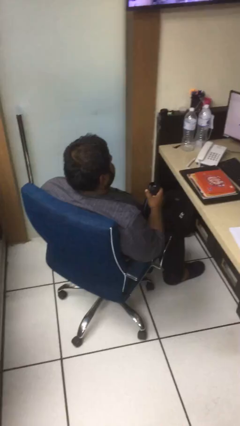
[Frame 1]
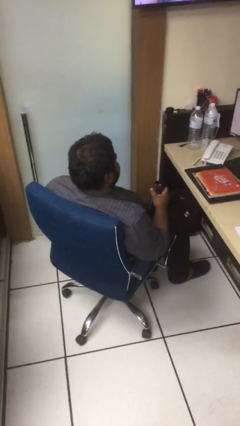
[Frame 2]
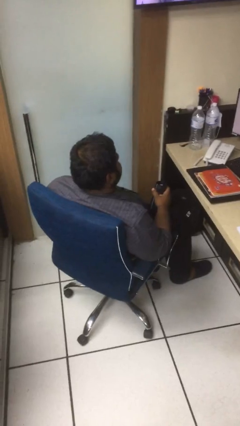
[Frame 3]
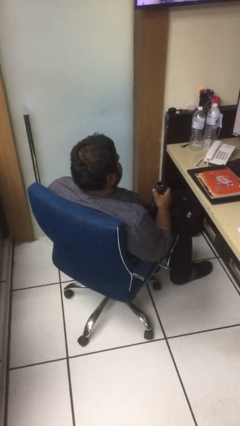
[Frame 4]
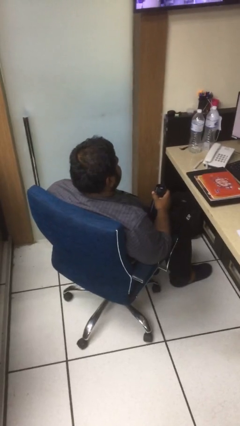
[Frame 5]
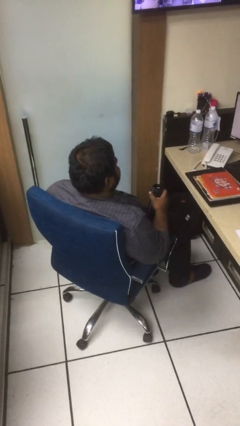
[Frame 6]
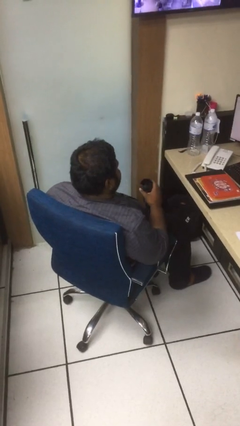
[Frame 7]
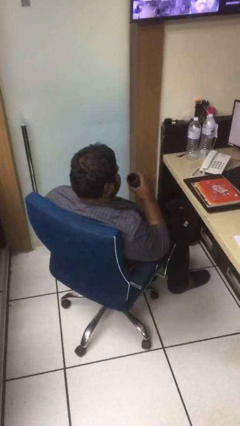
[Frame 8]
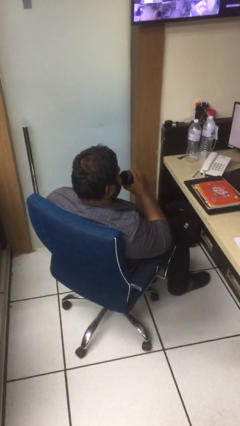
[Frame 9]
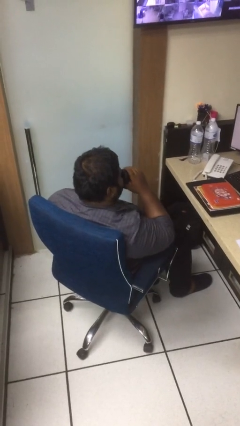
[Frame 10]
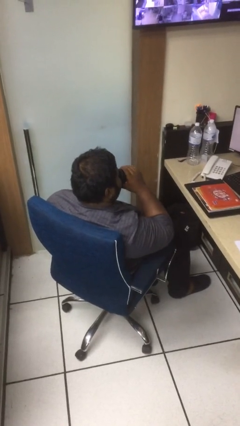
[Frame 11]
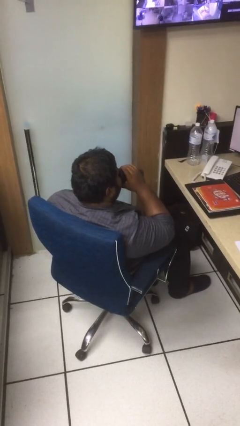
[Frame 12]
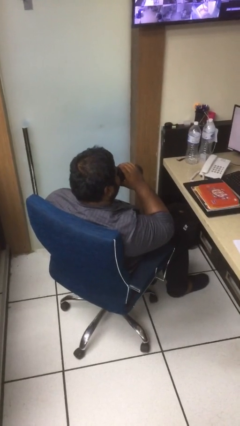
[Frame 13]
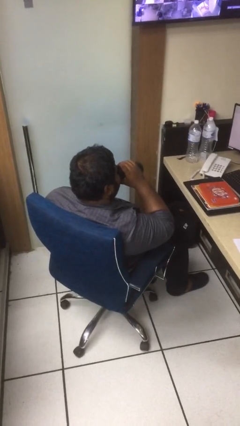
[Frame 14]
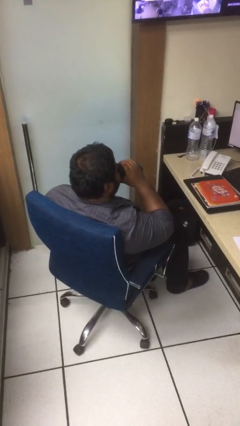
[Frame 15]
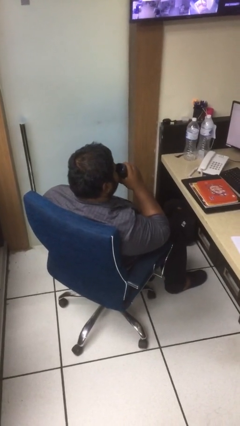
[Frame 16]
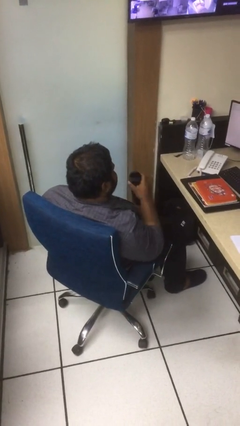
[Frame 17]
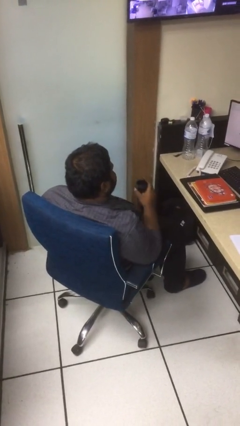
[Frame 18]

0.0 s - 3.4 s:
person drinks from bottle

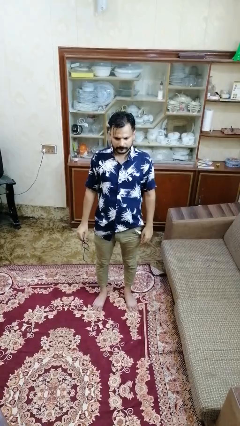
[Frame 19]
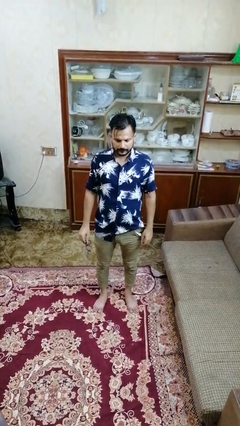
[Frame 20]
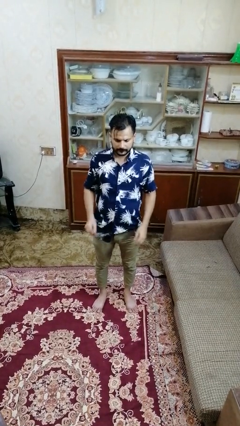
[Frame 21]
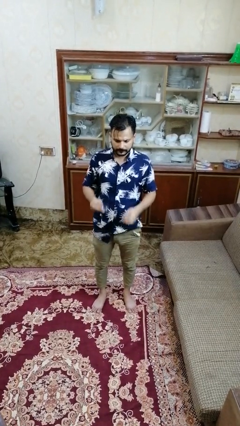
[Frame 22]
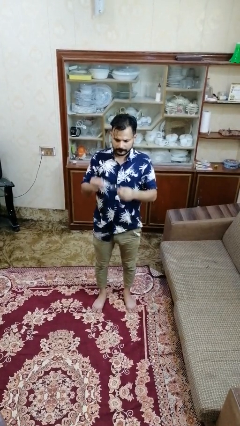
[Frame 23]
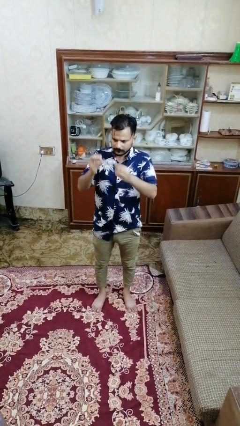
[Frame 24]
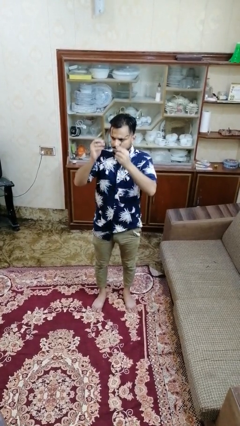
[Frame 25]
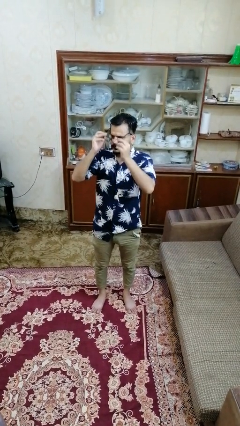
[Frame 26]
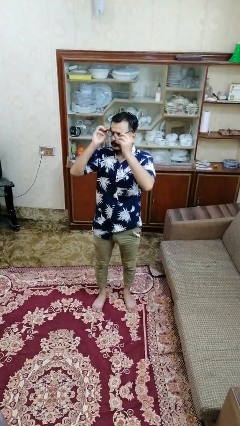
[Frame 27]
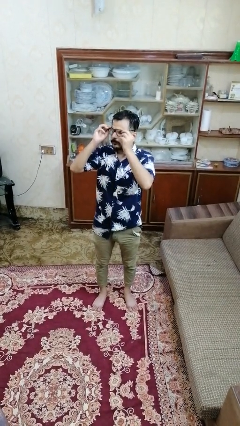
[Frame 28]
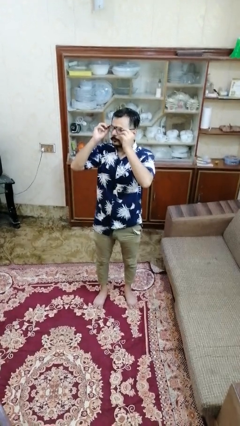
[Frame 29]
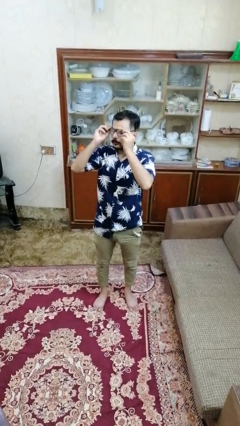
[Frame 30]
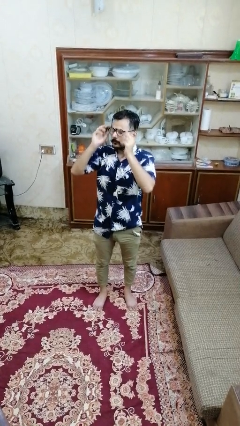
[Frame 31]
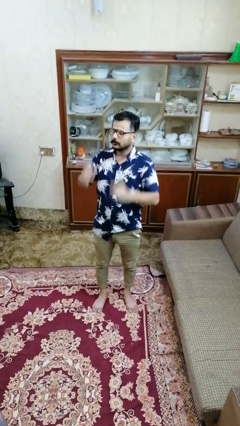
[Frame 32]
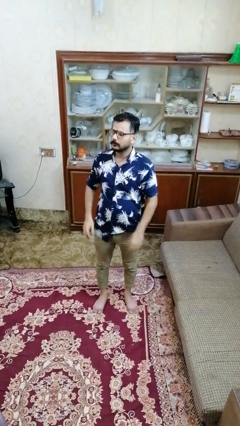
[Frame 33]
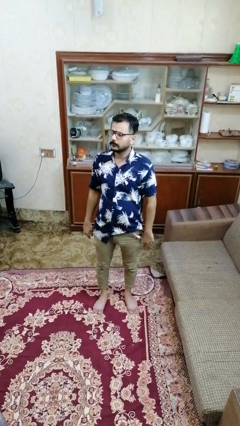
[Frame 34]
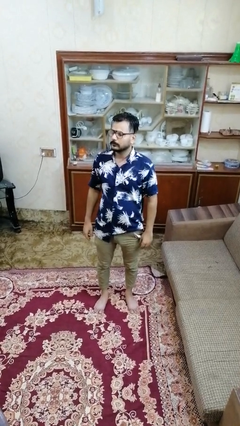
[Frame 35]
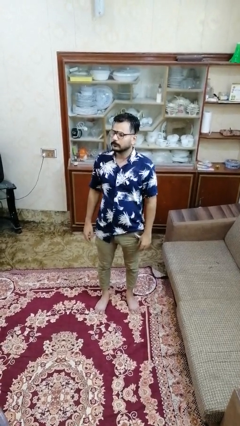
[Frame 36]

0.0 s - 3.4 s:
person puts on glasses

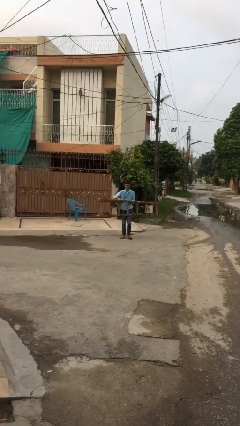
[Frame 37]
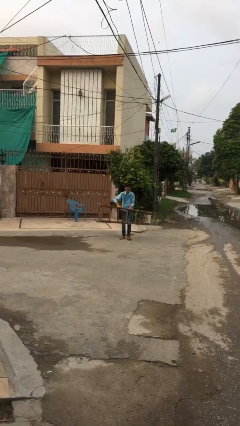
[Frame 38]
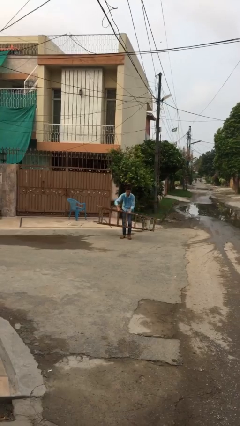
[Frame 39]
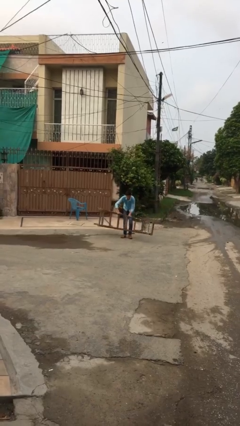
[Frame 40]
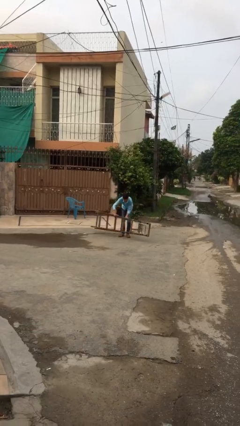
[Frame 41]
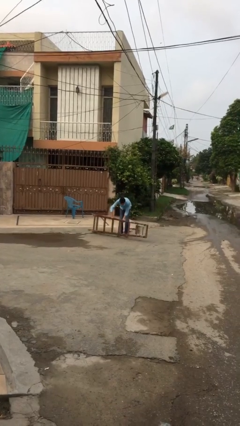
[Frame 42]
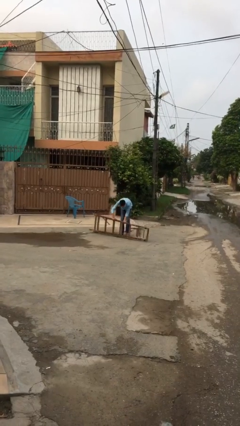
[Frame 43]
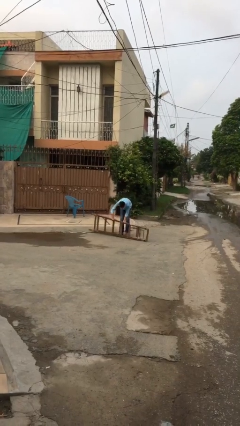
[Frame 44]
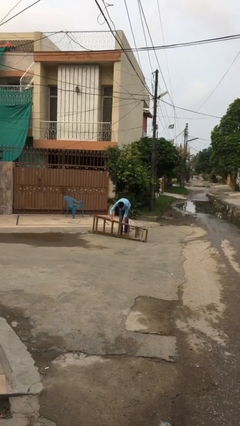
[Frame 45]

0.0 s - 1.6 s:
person puts down object on floor

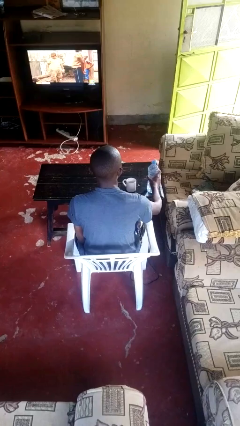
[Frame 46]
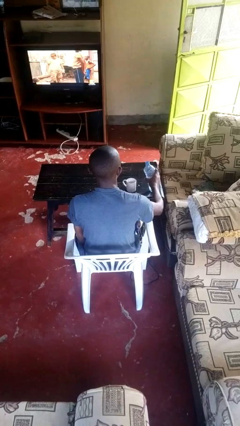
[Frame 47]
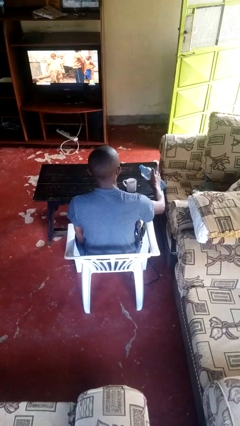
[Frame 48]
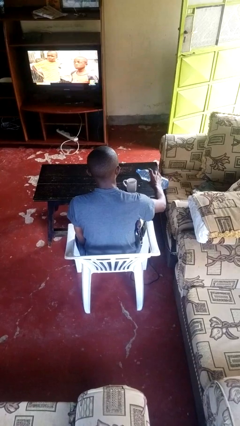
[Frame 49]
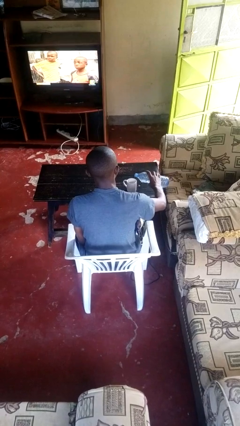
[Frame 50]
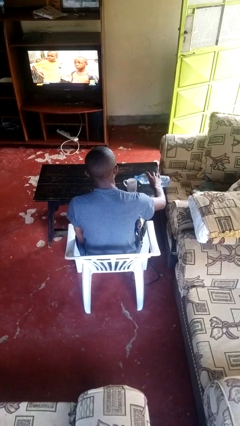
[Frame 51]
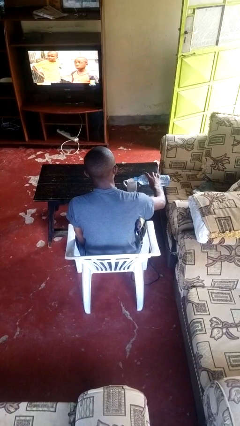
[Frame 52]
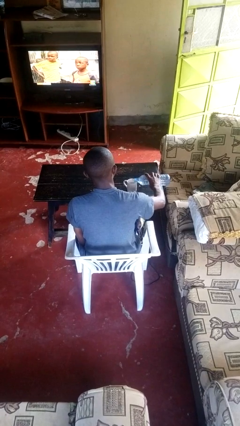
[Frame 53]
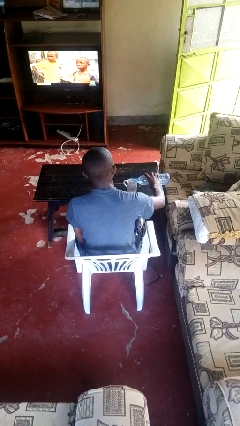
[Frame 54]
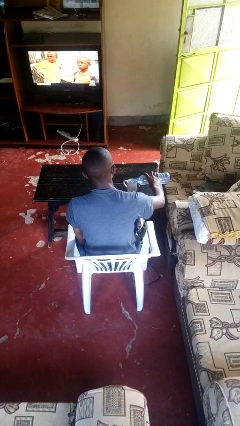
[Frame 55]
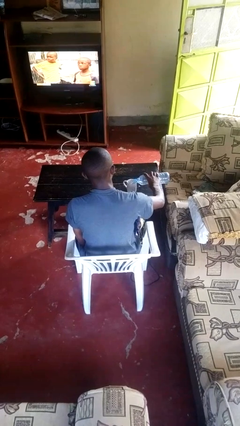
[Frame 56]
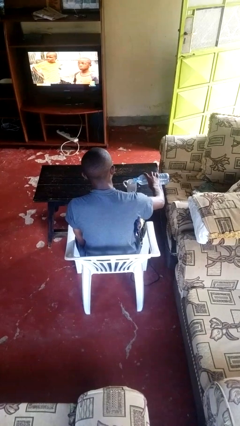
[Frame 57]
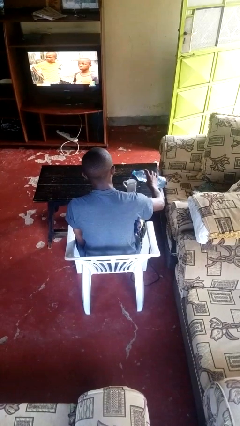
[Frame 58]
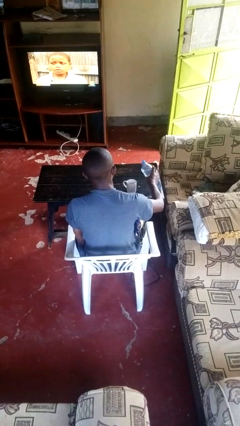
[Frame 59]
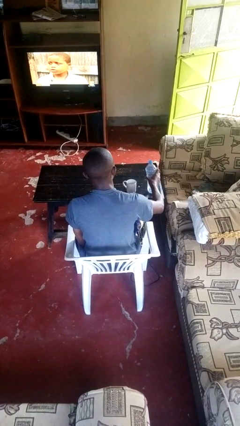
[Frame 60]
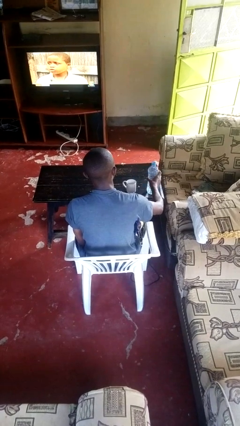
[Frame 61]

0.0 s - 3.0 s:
person pours liquid into cup

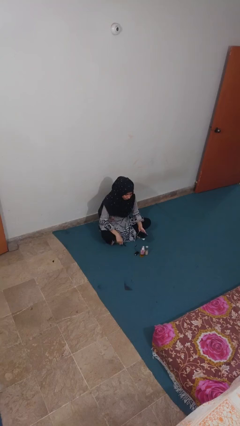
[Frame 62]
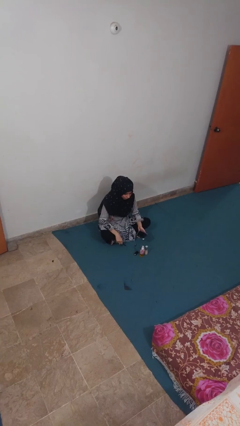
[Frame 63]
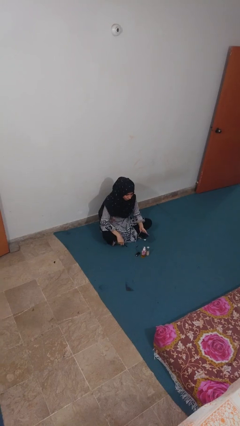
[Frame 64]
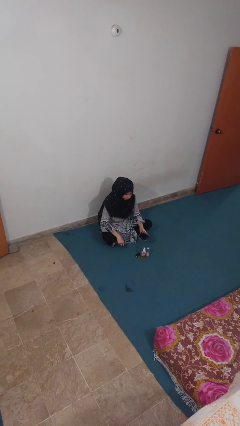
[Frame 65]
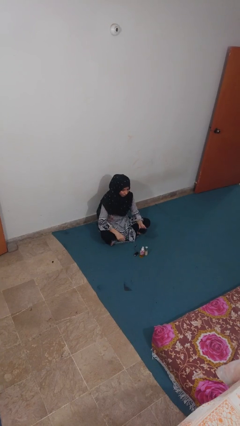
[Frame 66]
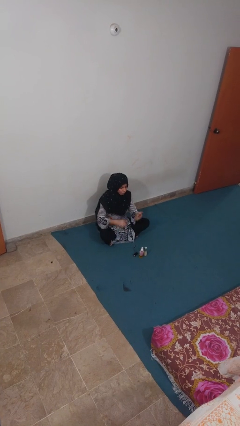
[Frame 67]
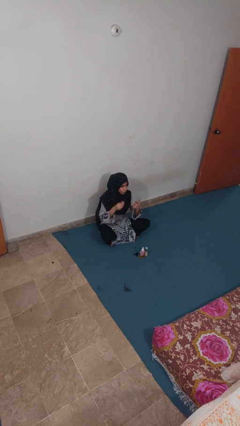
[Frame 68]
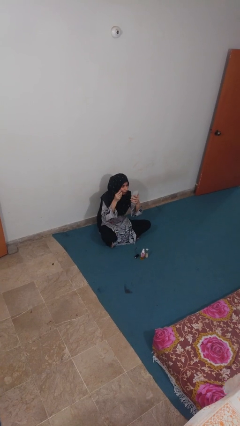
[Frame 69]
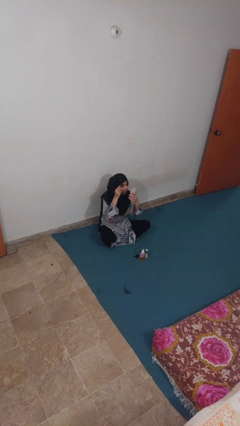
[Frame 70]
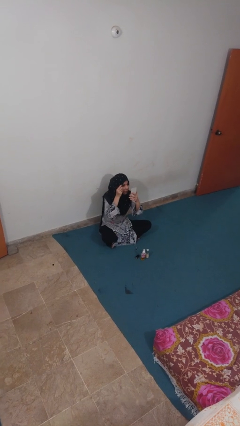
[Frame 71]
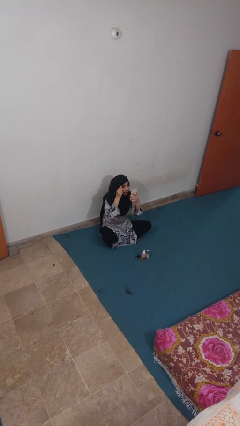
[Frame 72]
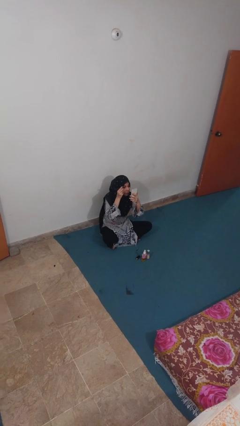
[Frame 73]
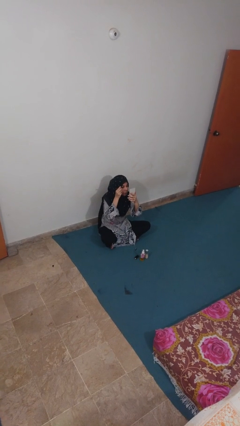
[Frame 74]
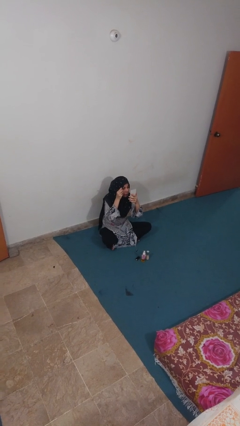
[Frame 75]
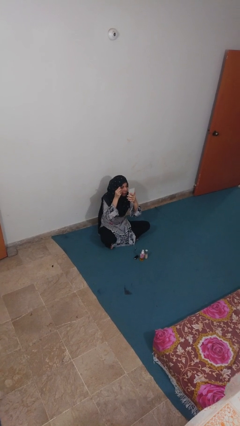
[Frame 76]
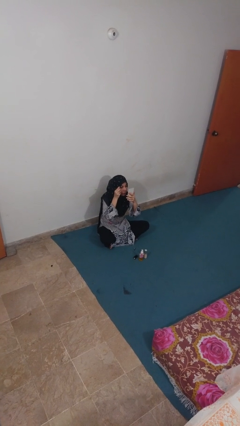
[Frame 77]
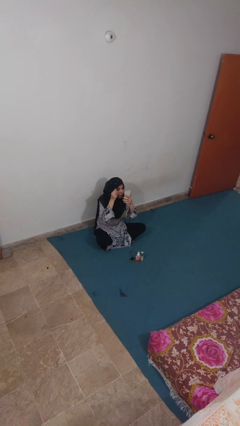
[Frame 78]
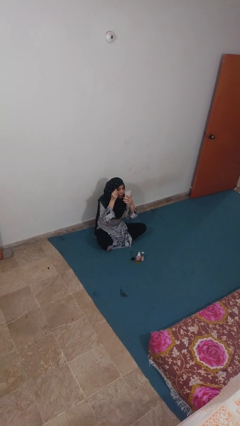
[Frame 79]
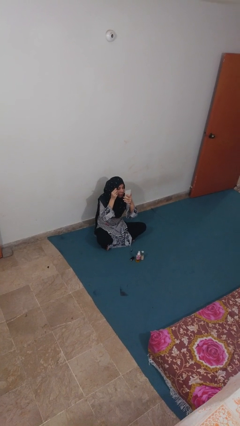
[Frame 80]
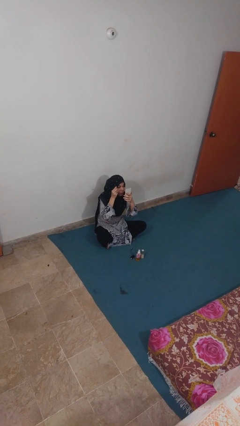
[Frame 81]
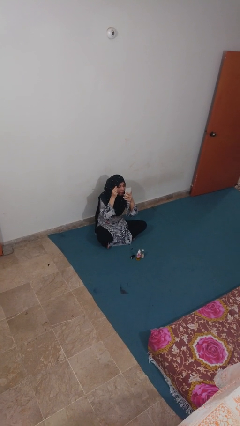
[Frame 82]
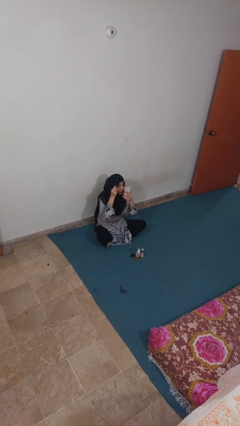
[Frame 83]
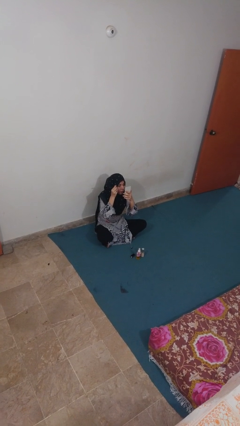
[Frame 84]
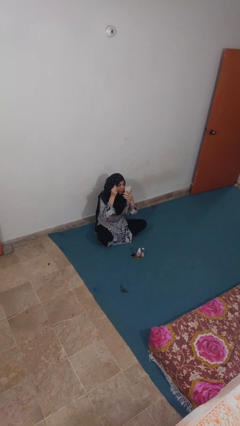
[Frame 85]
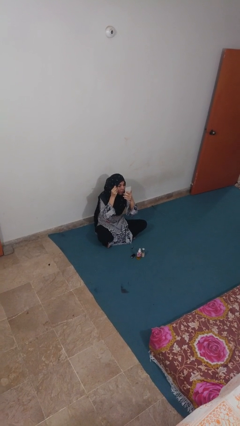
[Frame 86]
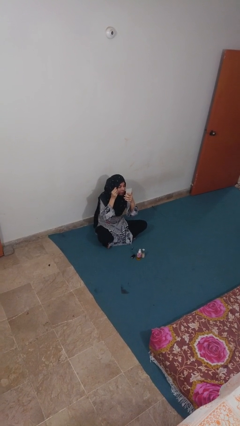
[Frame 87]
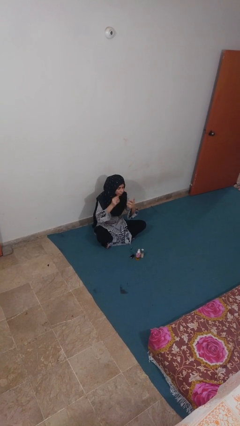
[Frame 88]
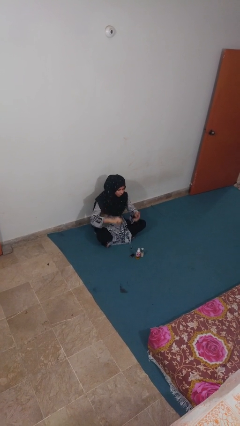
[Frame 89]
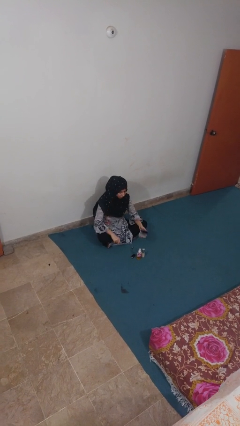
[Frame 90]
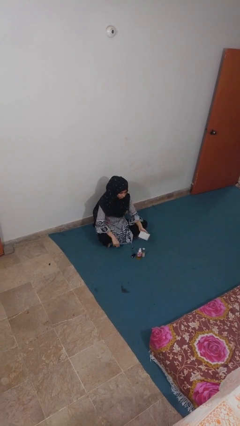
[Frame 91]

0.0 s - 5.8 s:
person applies eye makeup

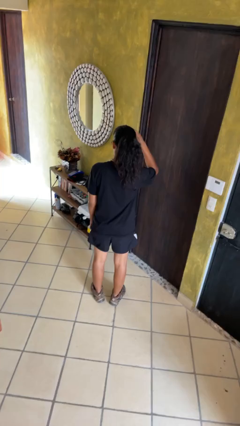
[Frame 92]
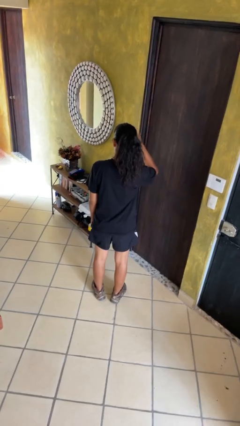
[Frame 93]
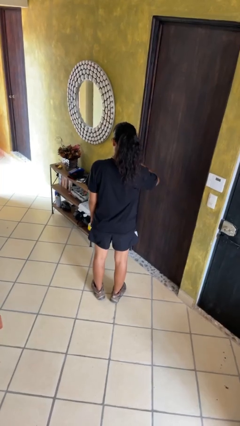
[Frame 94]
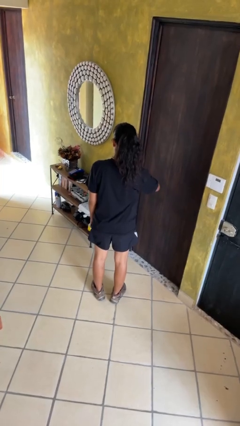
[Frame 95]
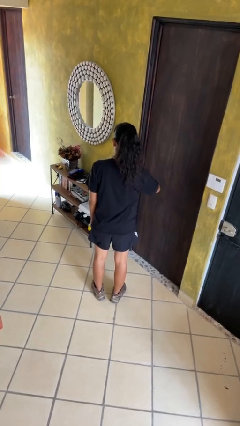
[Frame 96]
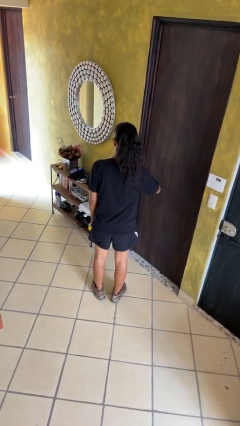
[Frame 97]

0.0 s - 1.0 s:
person gestures swipe down
